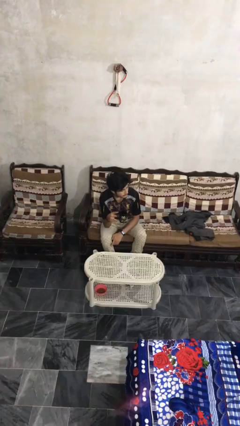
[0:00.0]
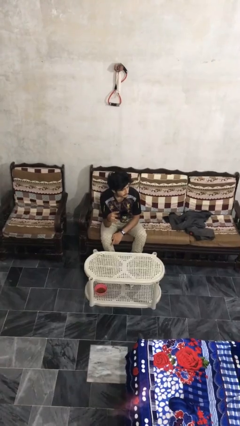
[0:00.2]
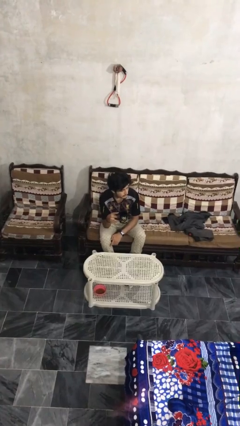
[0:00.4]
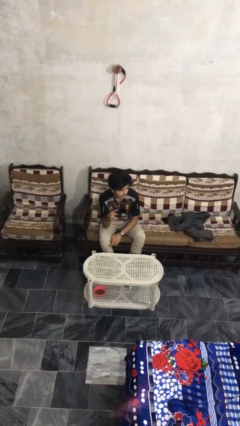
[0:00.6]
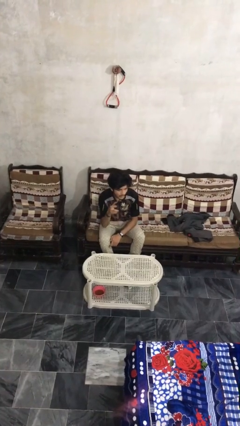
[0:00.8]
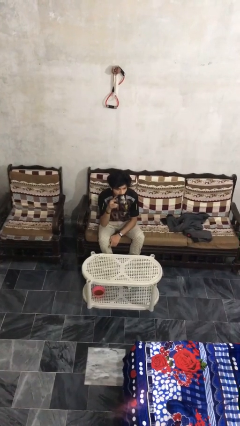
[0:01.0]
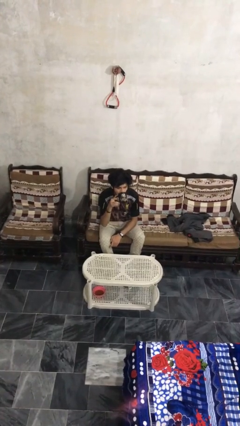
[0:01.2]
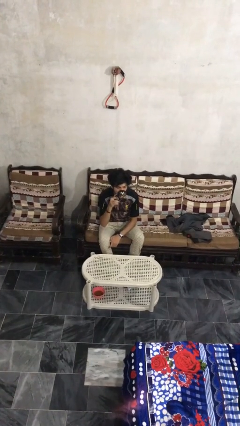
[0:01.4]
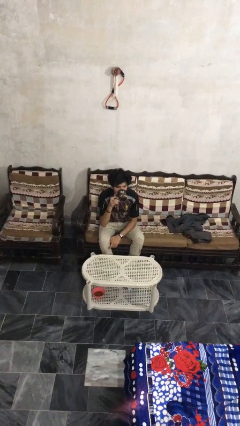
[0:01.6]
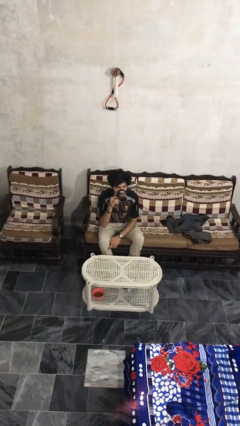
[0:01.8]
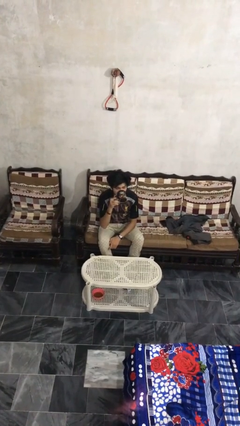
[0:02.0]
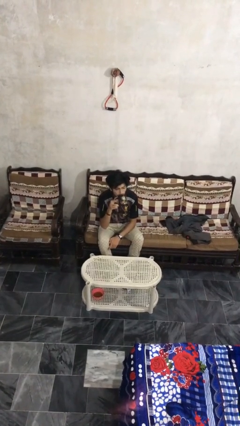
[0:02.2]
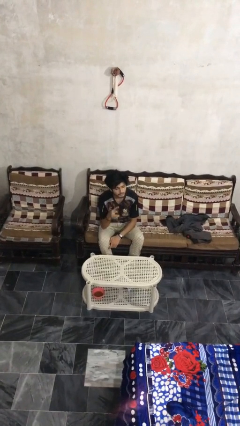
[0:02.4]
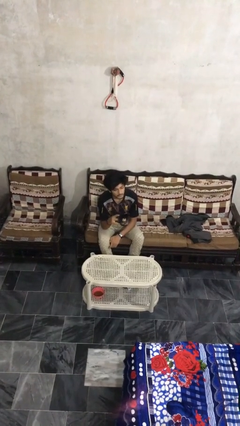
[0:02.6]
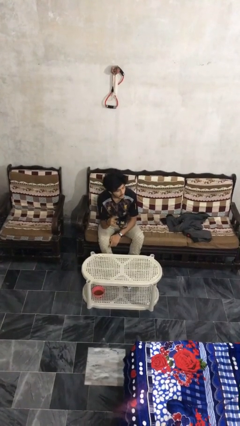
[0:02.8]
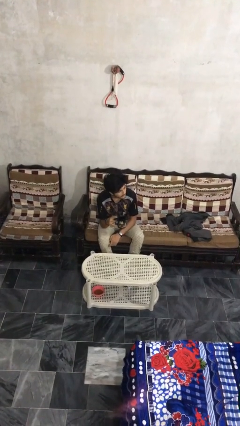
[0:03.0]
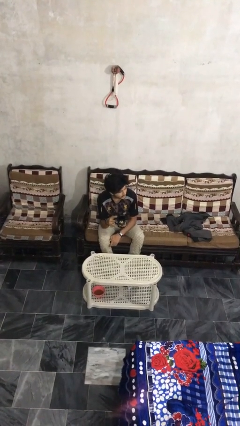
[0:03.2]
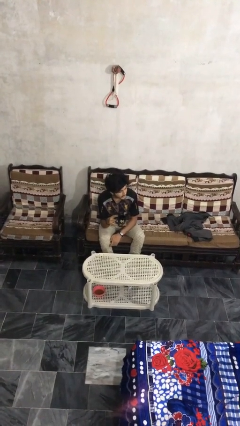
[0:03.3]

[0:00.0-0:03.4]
person drinks from mug

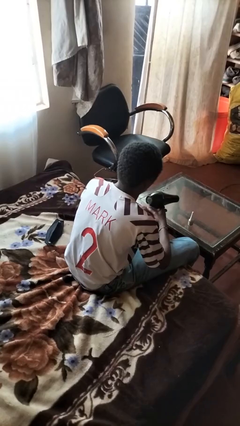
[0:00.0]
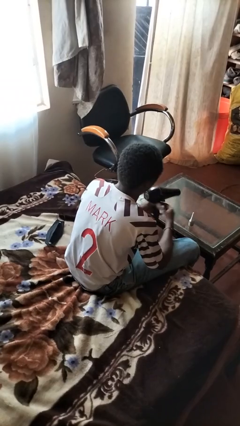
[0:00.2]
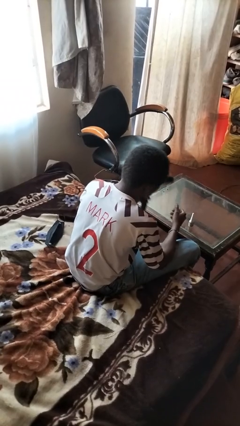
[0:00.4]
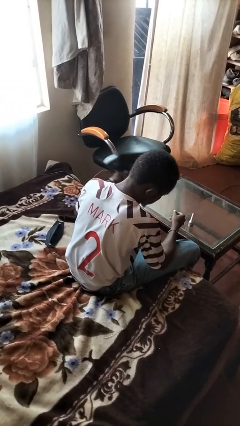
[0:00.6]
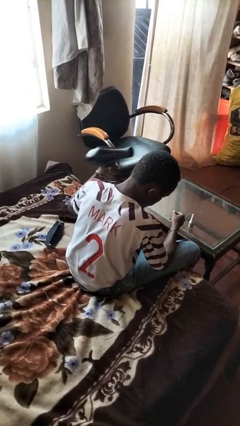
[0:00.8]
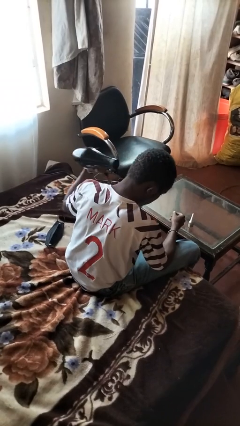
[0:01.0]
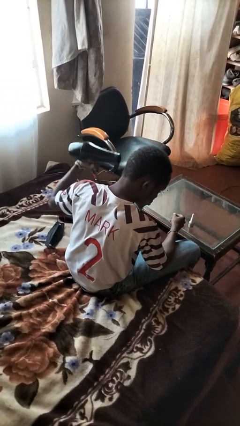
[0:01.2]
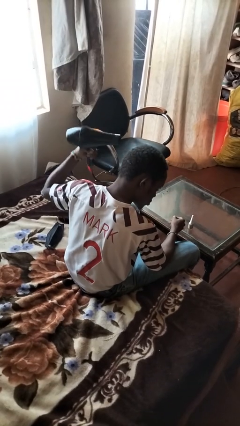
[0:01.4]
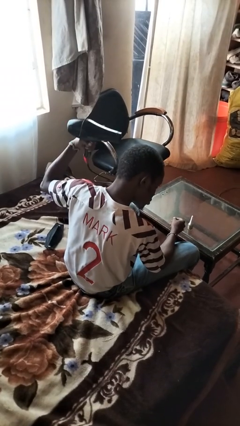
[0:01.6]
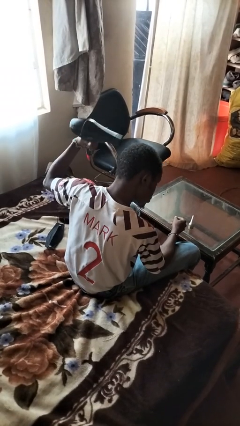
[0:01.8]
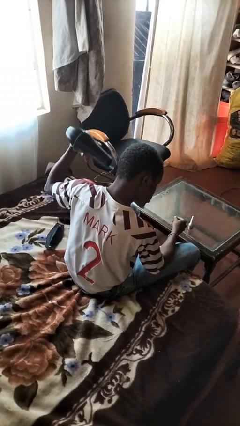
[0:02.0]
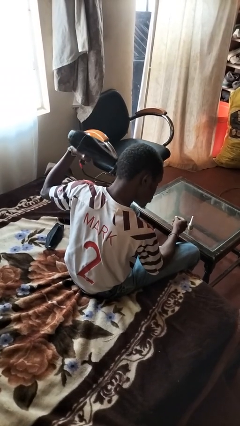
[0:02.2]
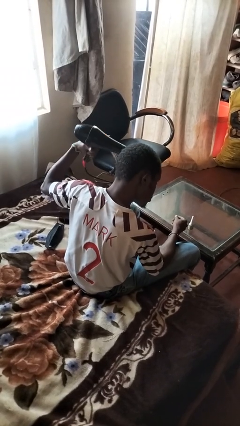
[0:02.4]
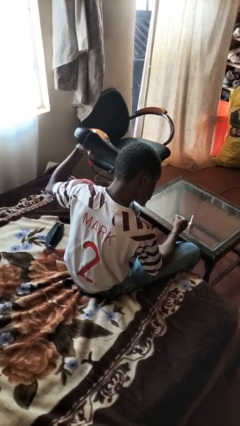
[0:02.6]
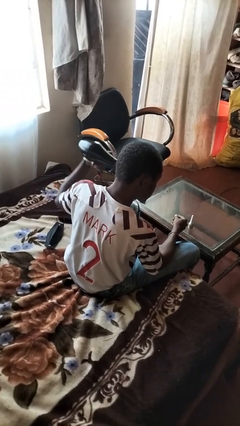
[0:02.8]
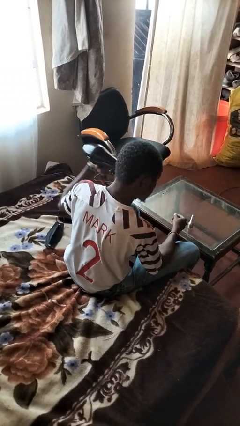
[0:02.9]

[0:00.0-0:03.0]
person dries hair with hairdryer

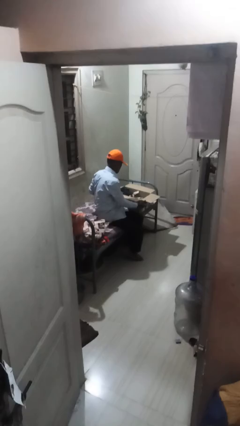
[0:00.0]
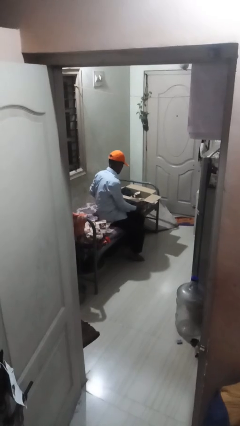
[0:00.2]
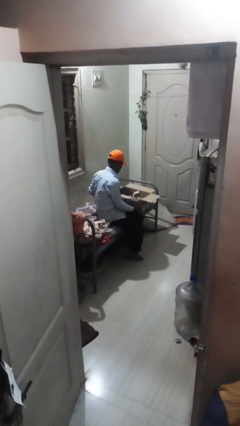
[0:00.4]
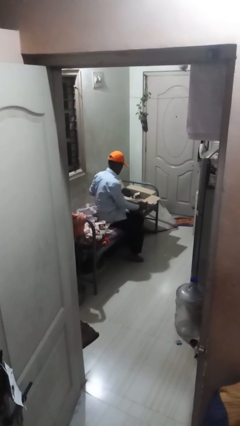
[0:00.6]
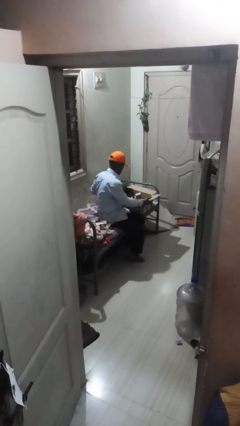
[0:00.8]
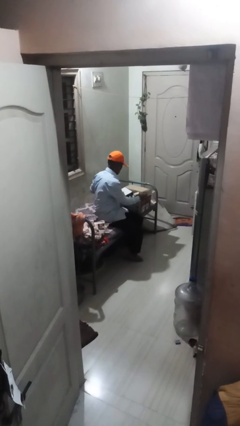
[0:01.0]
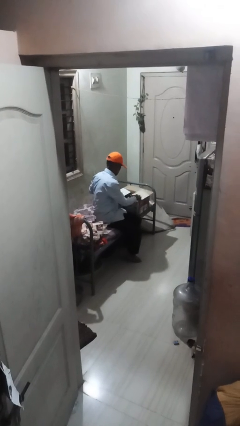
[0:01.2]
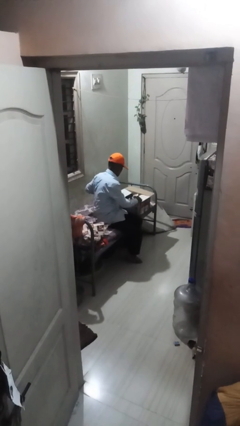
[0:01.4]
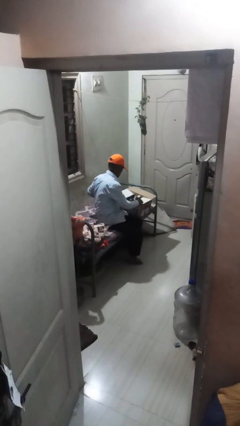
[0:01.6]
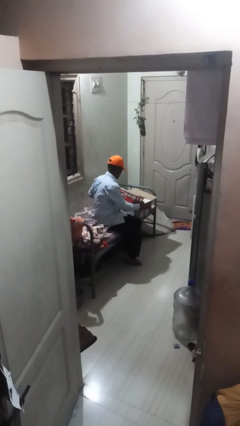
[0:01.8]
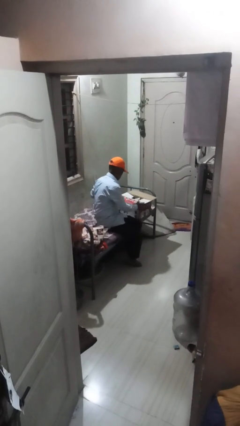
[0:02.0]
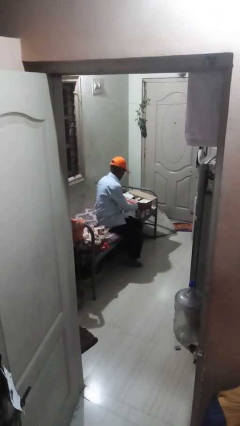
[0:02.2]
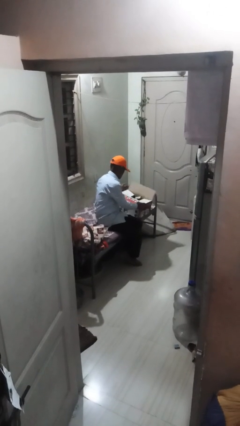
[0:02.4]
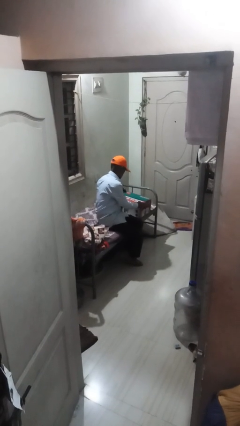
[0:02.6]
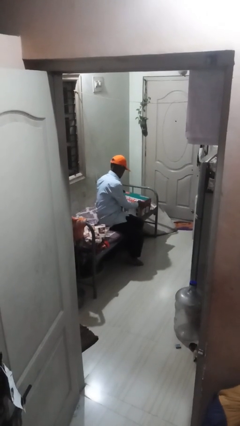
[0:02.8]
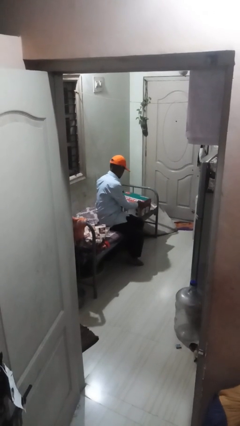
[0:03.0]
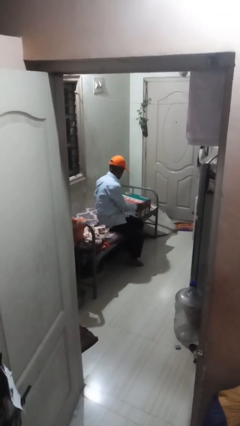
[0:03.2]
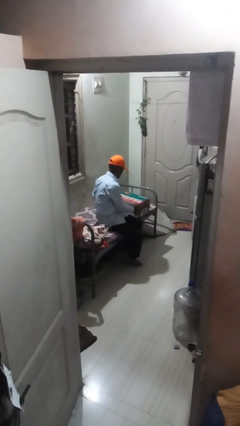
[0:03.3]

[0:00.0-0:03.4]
person closes box

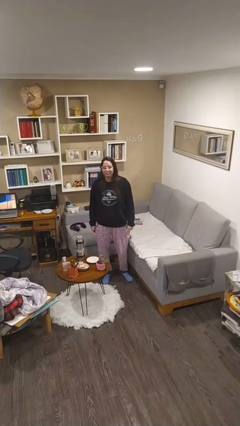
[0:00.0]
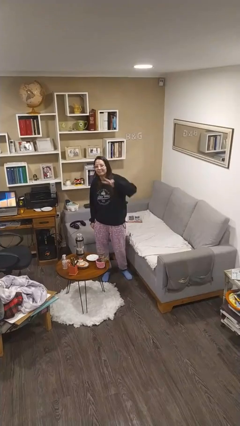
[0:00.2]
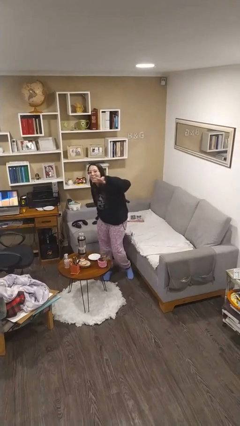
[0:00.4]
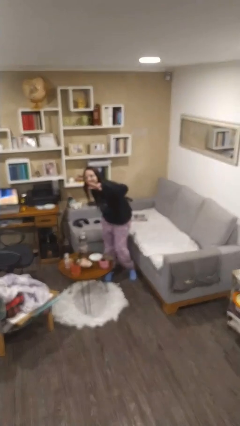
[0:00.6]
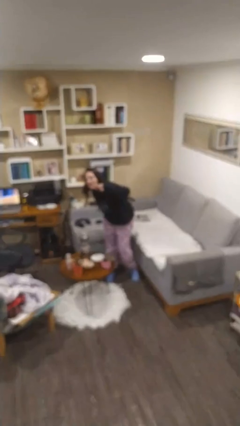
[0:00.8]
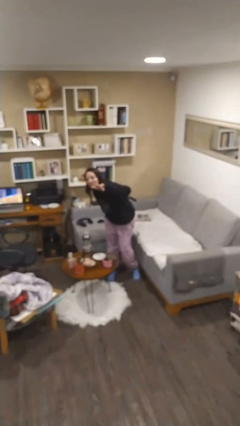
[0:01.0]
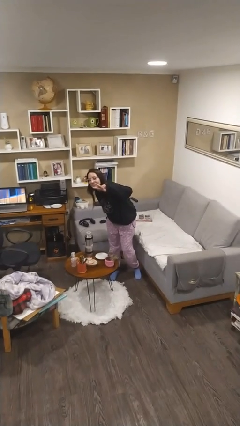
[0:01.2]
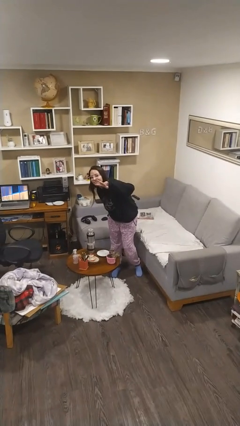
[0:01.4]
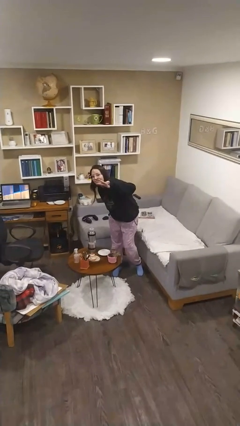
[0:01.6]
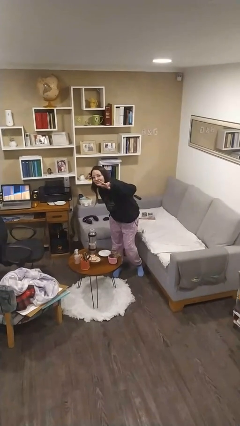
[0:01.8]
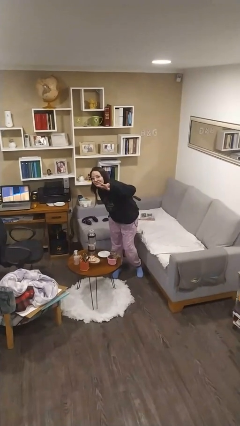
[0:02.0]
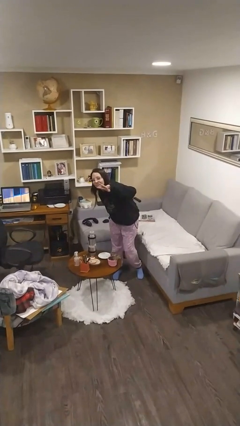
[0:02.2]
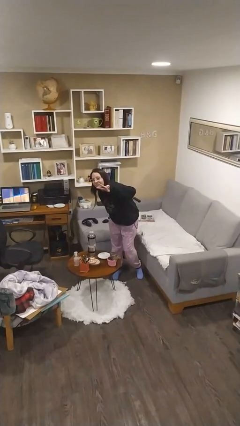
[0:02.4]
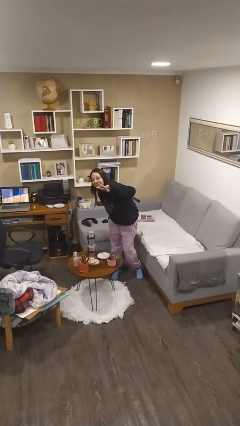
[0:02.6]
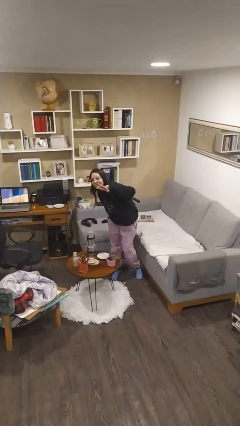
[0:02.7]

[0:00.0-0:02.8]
person gestures peace

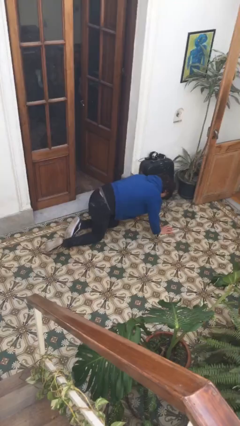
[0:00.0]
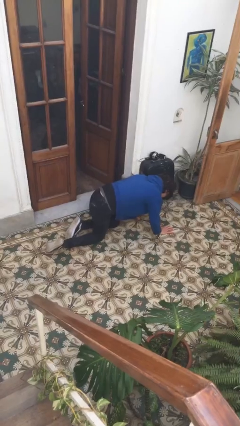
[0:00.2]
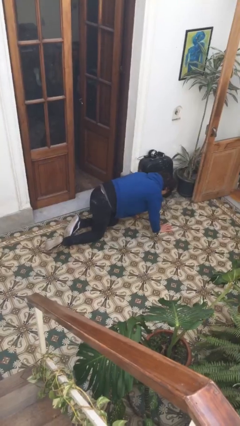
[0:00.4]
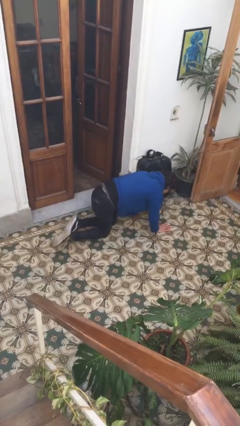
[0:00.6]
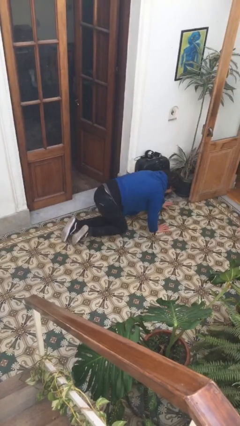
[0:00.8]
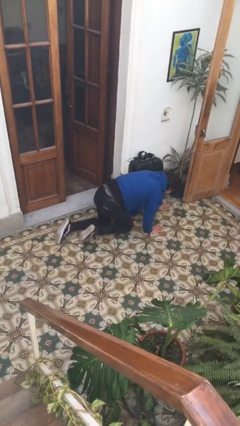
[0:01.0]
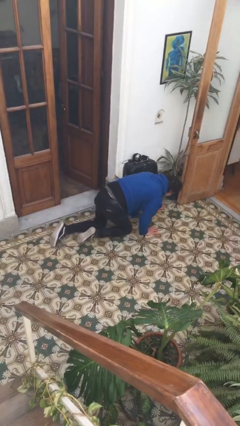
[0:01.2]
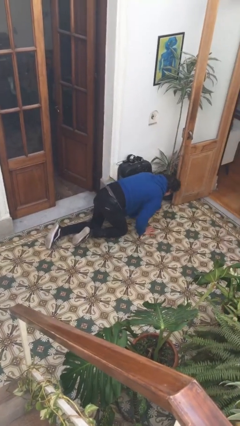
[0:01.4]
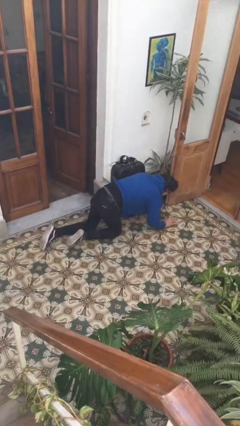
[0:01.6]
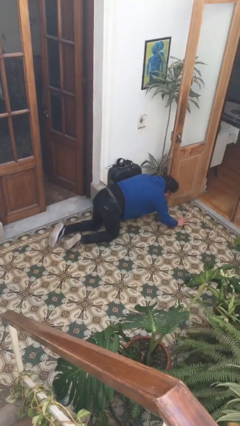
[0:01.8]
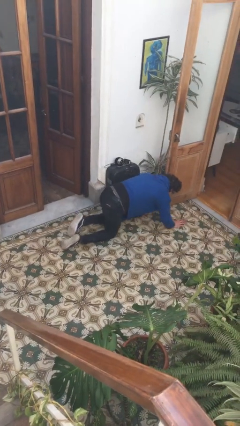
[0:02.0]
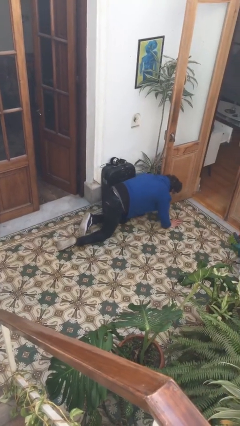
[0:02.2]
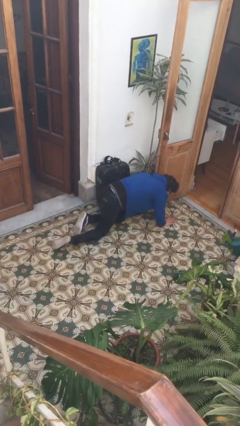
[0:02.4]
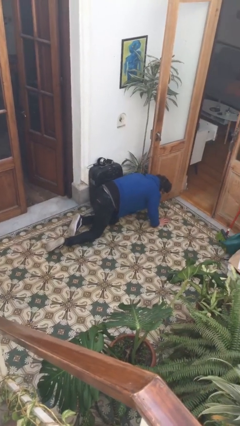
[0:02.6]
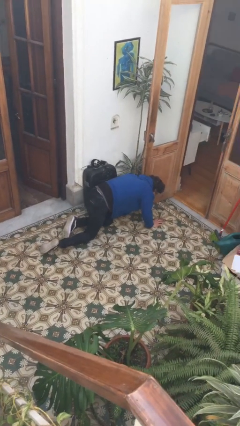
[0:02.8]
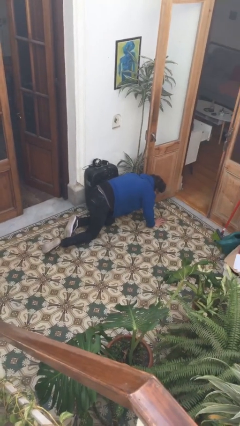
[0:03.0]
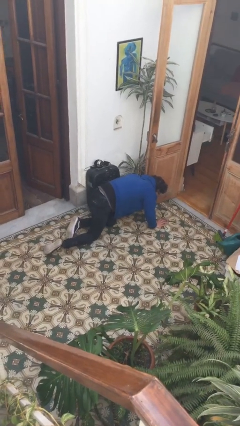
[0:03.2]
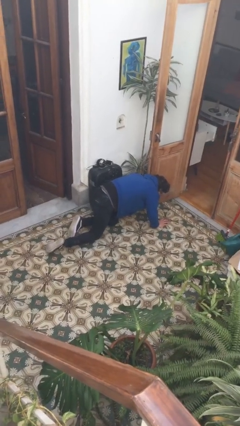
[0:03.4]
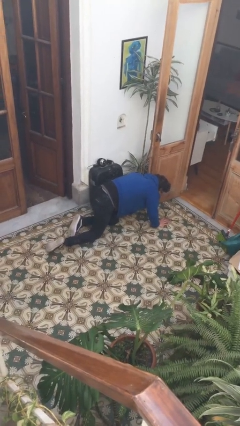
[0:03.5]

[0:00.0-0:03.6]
person crawls

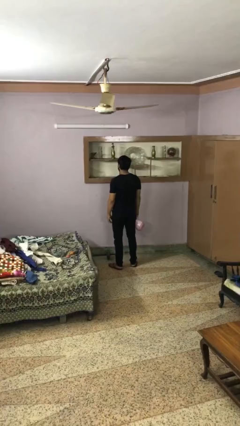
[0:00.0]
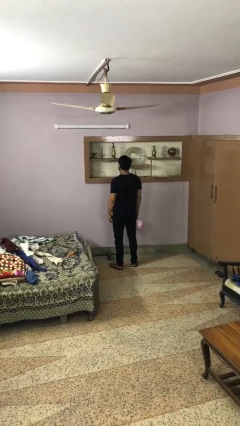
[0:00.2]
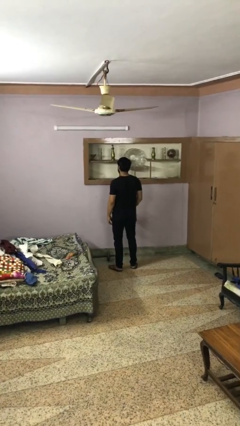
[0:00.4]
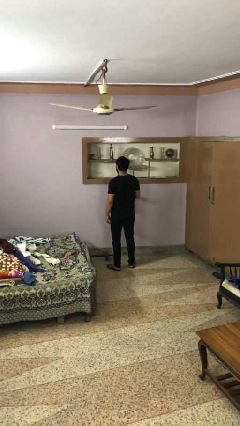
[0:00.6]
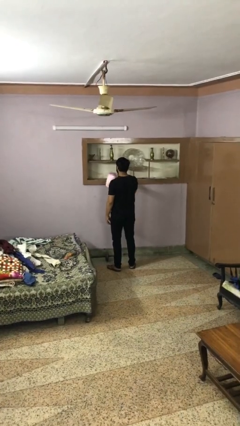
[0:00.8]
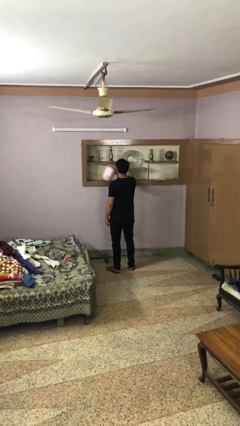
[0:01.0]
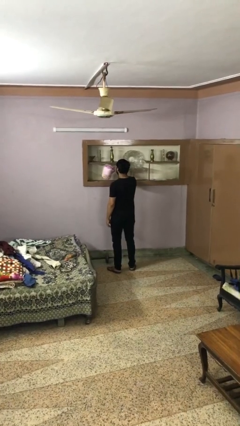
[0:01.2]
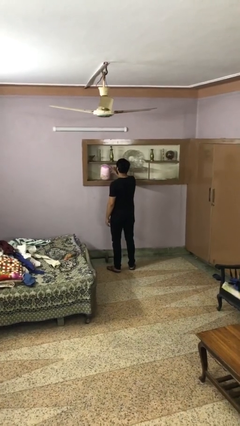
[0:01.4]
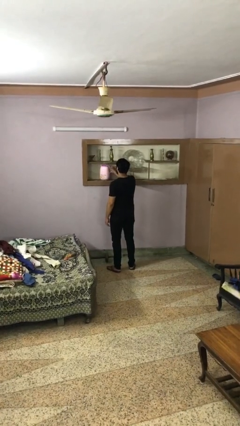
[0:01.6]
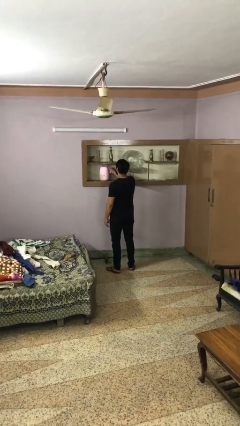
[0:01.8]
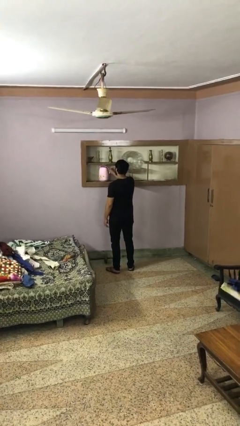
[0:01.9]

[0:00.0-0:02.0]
person puts down object on countertop
